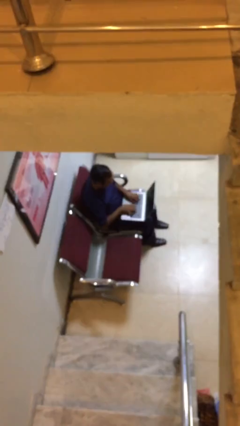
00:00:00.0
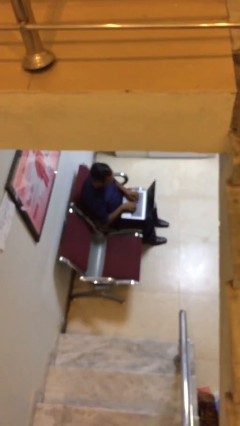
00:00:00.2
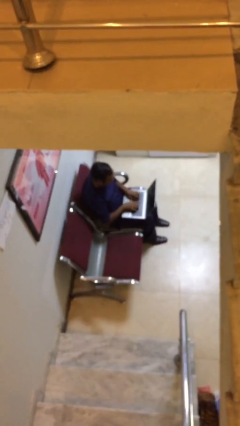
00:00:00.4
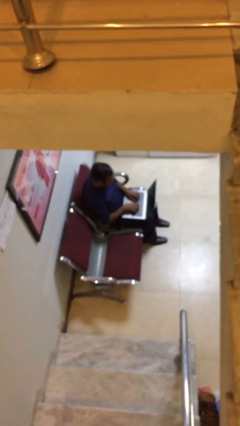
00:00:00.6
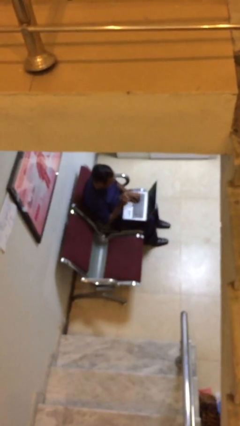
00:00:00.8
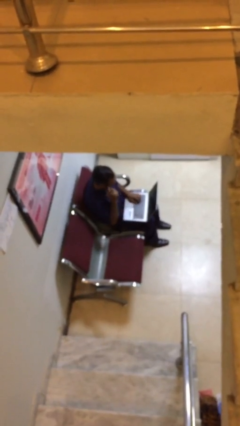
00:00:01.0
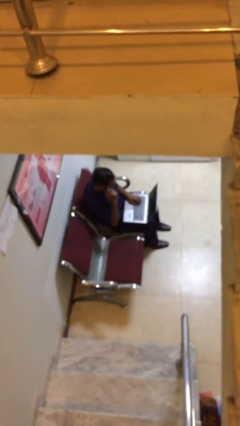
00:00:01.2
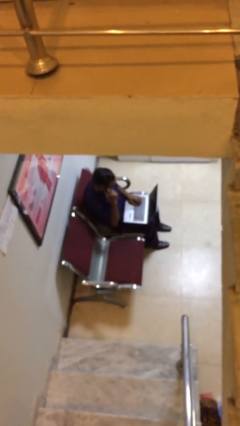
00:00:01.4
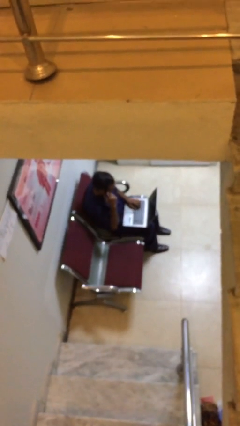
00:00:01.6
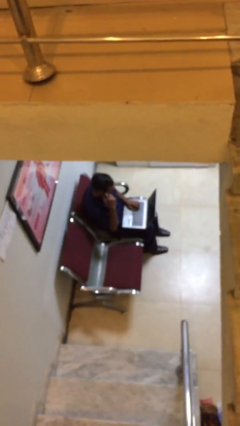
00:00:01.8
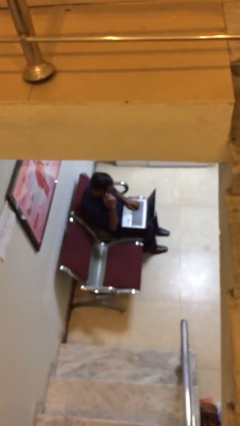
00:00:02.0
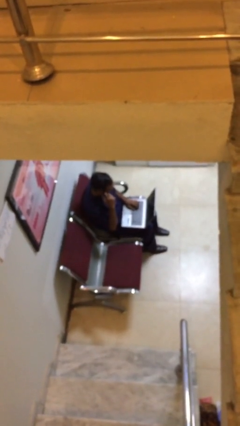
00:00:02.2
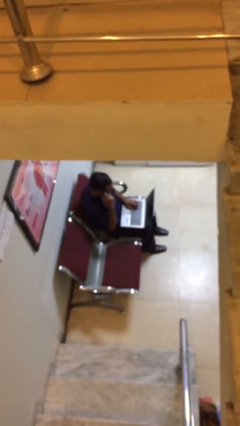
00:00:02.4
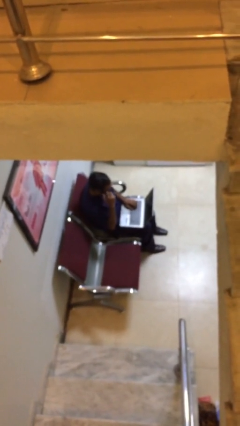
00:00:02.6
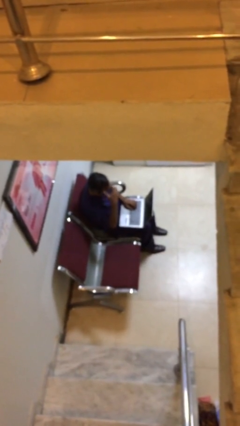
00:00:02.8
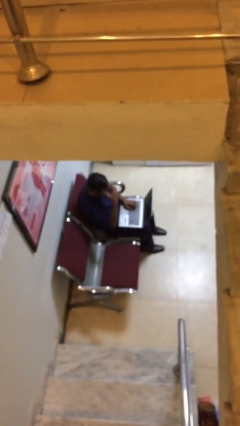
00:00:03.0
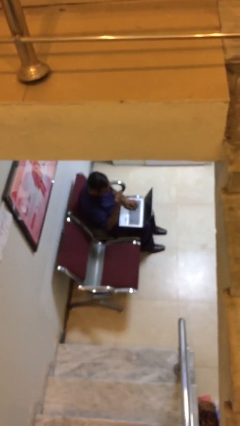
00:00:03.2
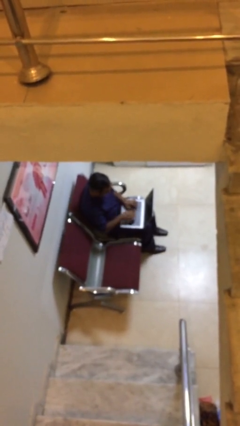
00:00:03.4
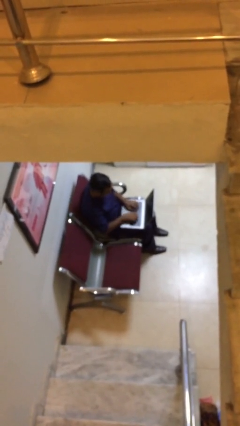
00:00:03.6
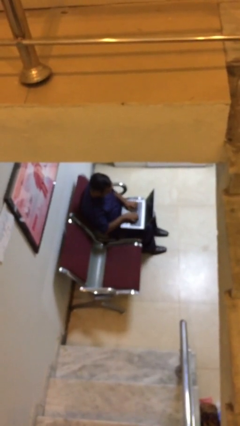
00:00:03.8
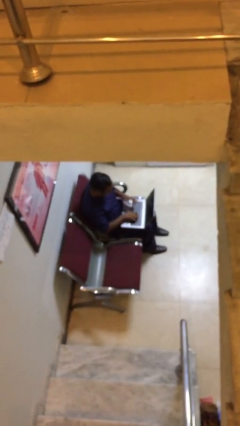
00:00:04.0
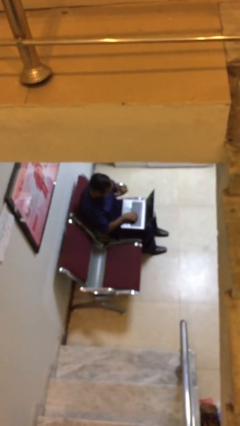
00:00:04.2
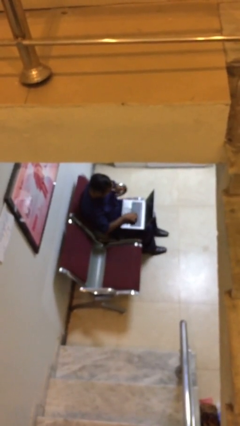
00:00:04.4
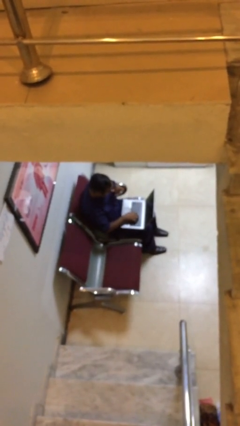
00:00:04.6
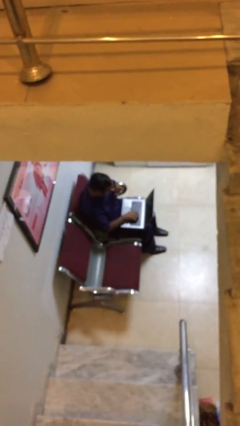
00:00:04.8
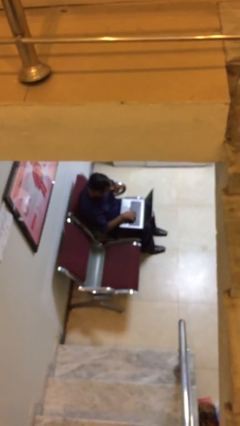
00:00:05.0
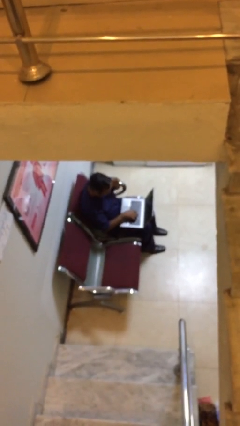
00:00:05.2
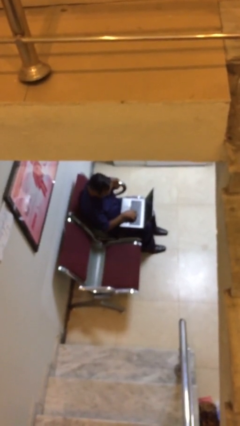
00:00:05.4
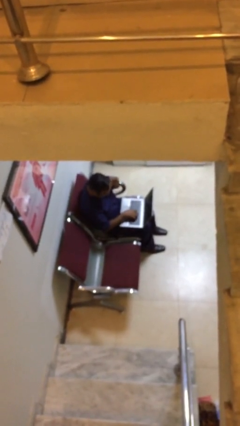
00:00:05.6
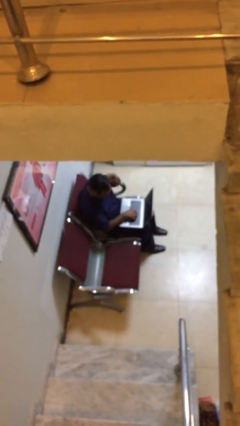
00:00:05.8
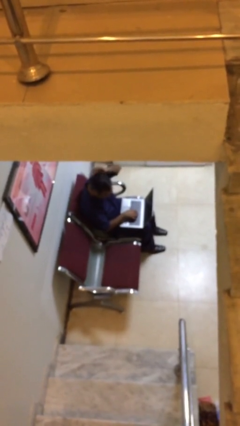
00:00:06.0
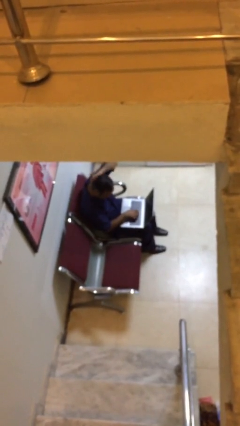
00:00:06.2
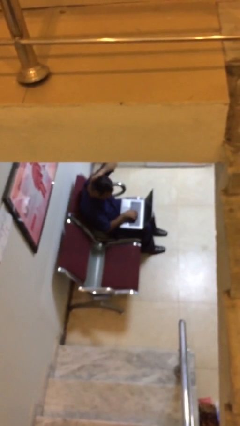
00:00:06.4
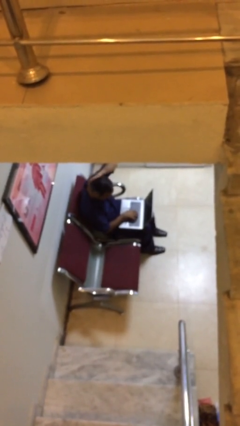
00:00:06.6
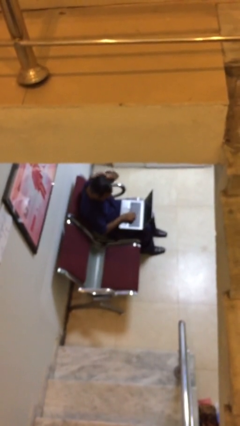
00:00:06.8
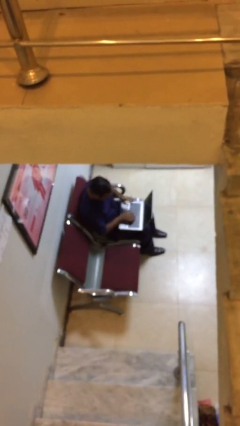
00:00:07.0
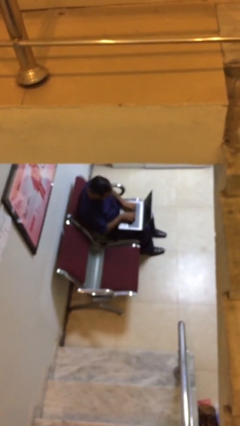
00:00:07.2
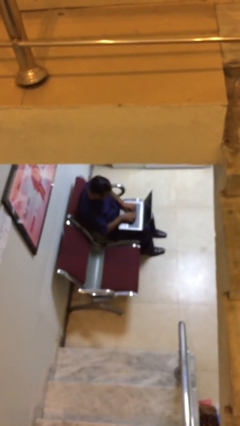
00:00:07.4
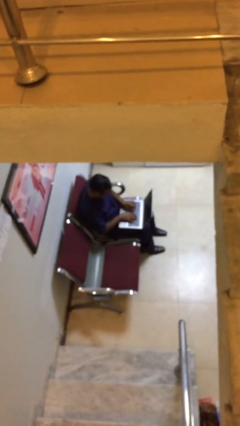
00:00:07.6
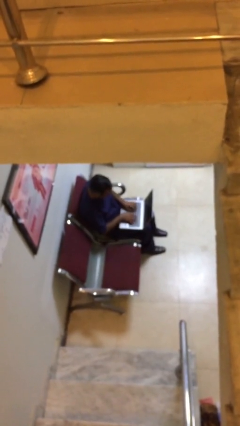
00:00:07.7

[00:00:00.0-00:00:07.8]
person interacts with laptop

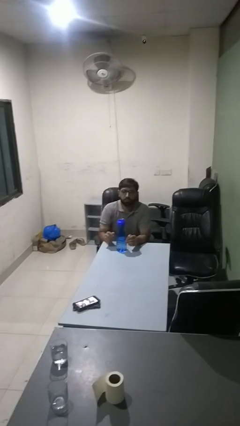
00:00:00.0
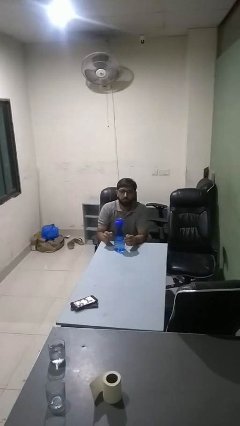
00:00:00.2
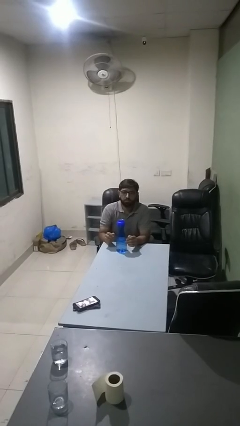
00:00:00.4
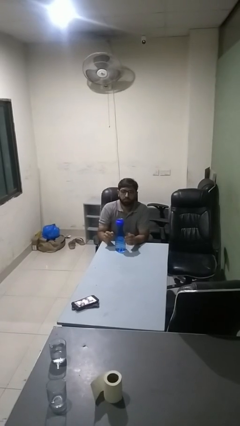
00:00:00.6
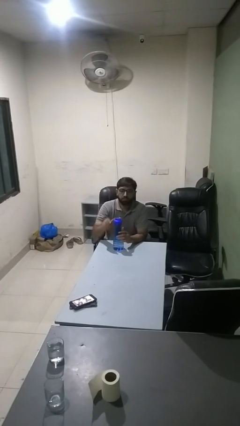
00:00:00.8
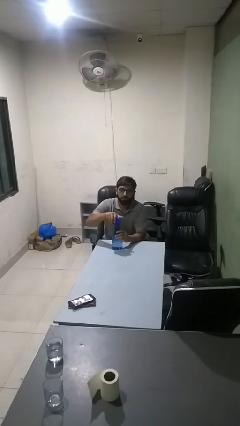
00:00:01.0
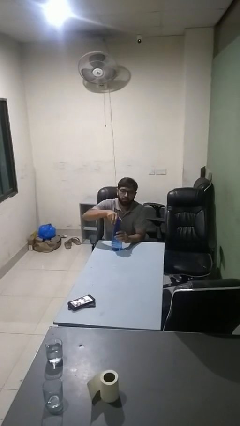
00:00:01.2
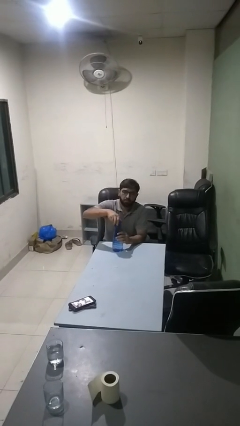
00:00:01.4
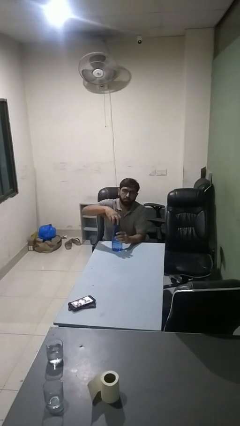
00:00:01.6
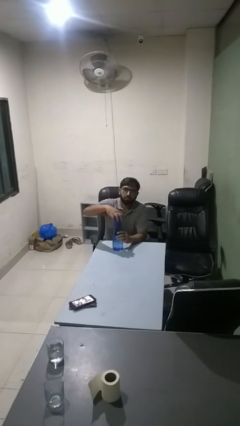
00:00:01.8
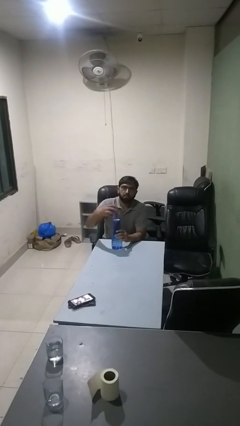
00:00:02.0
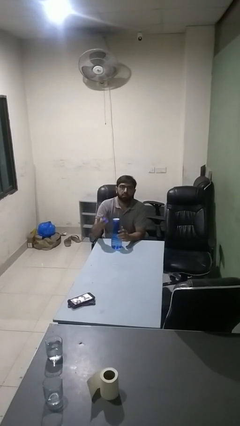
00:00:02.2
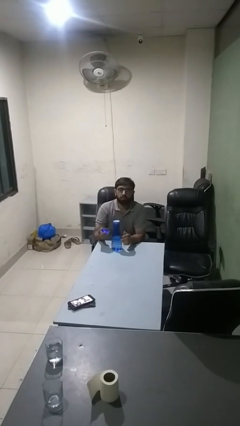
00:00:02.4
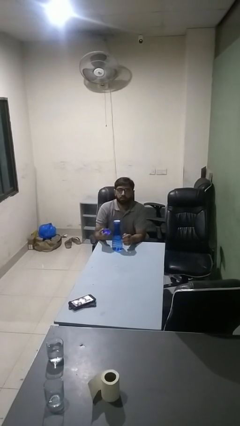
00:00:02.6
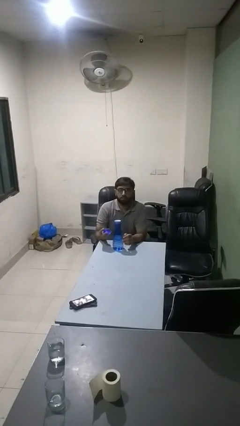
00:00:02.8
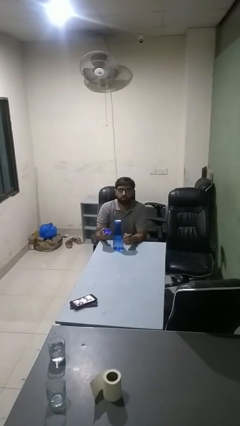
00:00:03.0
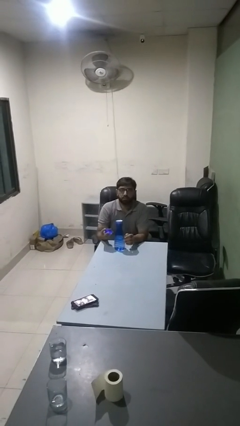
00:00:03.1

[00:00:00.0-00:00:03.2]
person unscrews lid from bottle

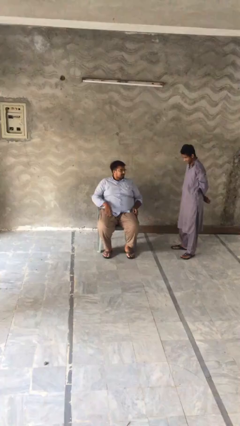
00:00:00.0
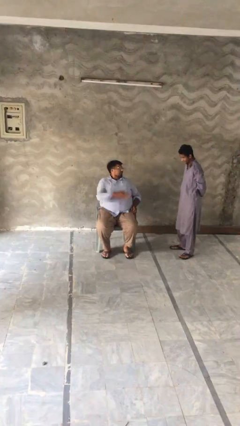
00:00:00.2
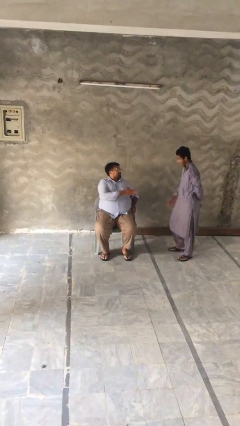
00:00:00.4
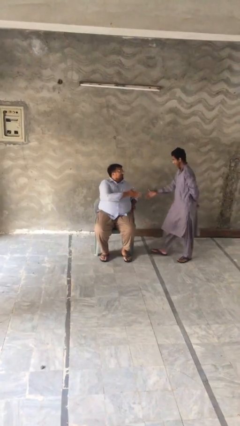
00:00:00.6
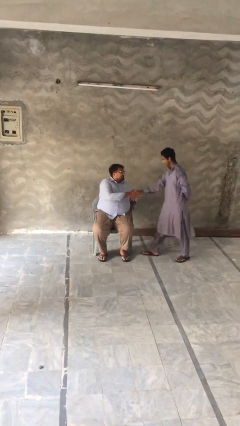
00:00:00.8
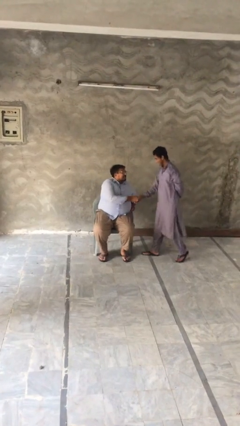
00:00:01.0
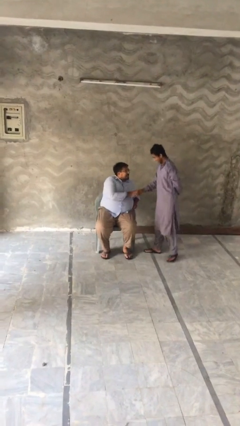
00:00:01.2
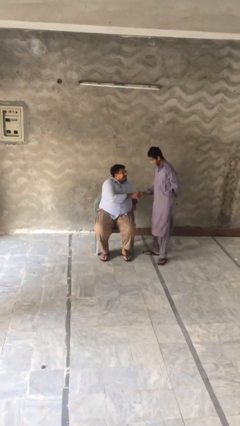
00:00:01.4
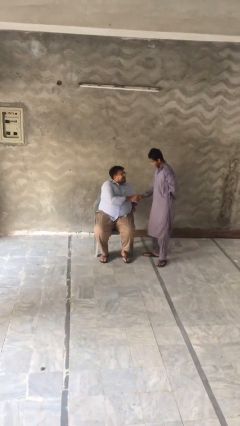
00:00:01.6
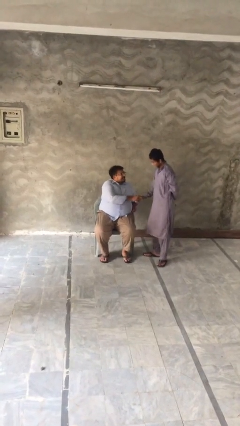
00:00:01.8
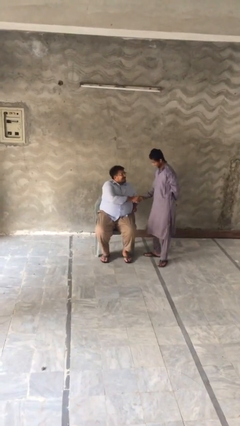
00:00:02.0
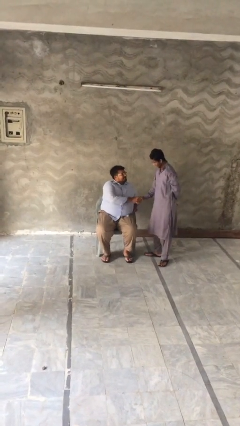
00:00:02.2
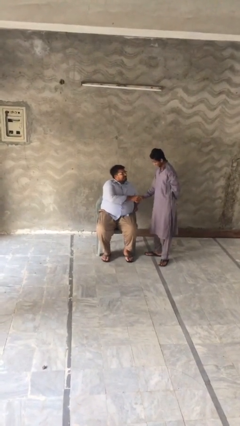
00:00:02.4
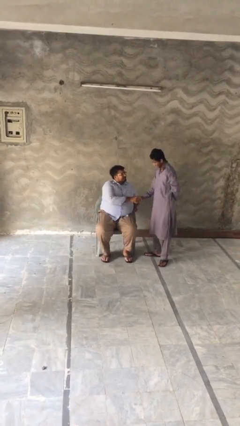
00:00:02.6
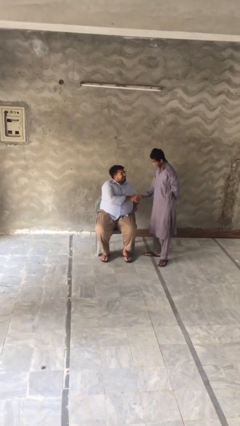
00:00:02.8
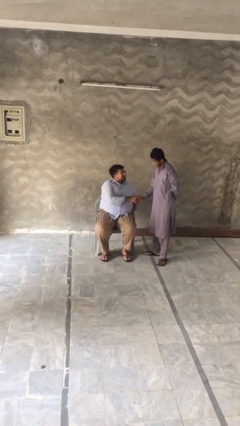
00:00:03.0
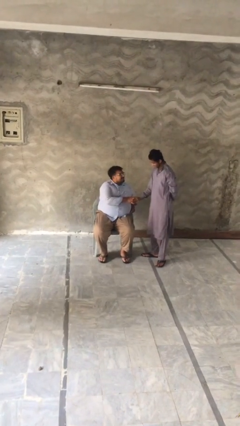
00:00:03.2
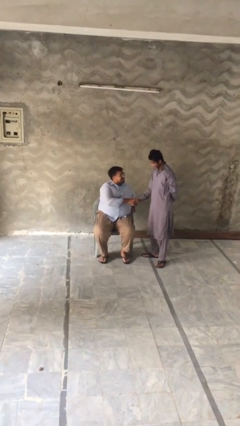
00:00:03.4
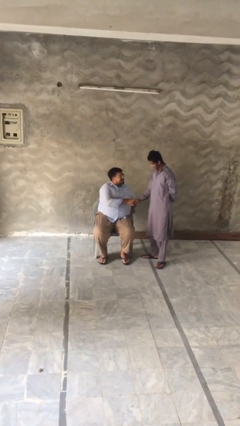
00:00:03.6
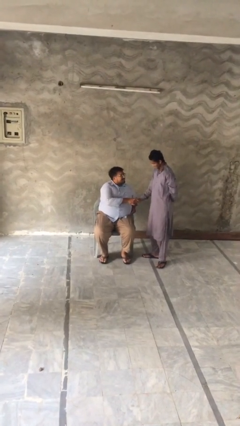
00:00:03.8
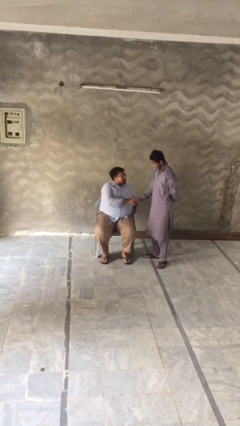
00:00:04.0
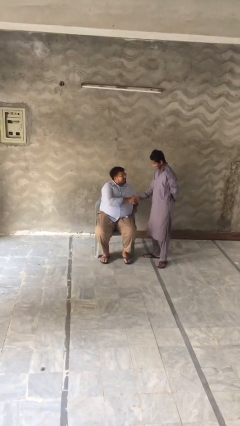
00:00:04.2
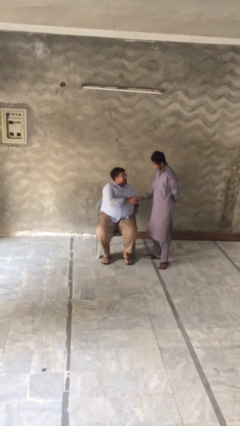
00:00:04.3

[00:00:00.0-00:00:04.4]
person shakes hand

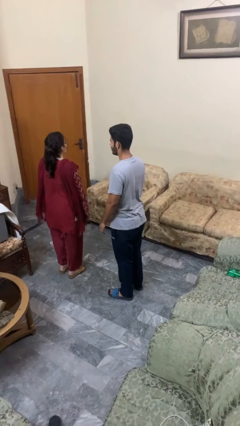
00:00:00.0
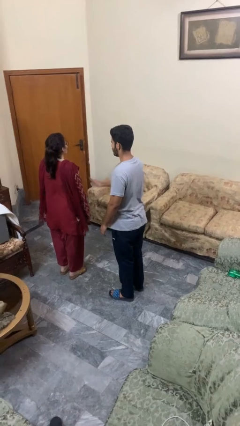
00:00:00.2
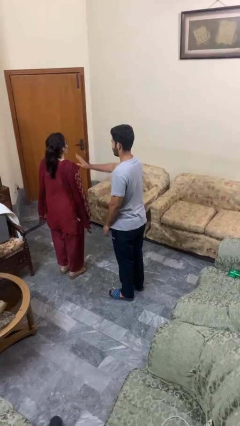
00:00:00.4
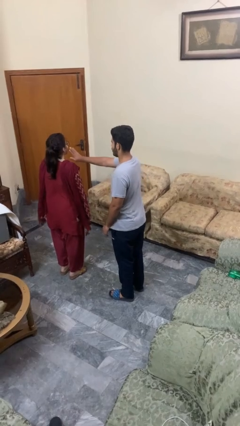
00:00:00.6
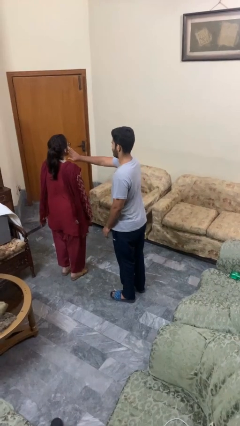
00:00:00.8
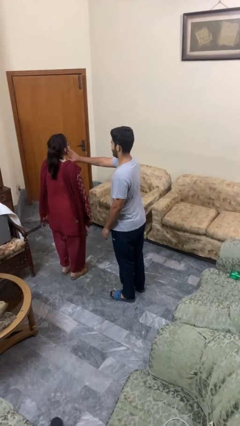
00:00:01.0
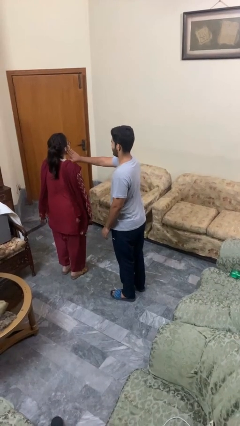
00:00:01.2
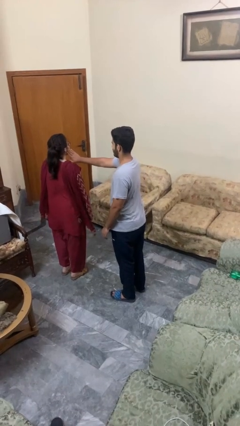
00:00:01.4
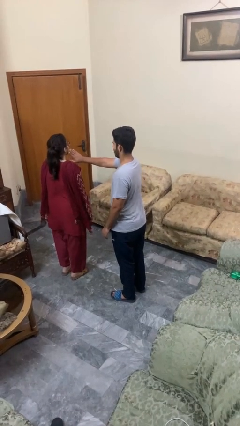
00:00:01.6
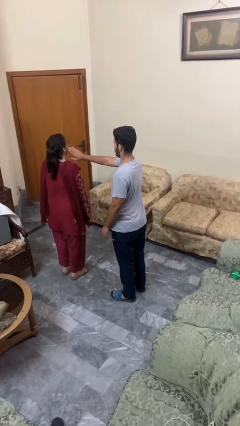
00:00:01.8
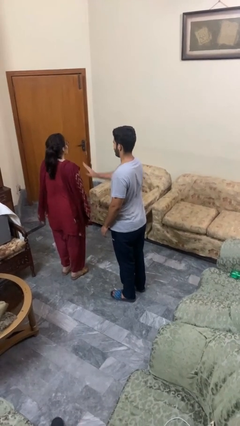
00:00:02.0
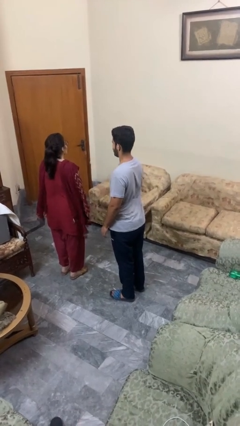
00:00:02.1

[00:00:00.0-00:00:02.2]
person touches face of person

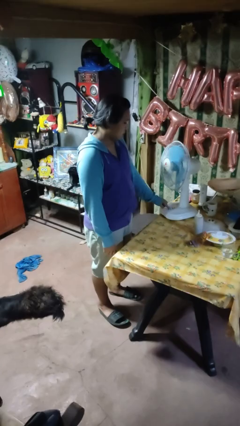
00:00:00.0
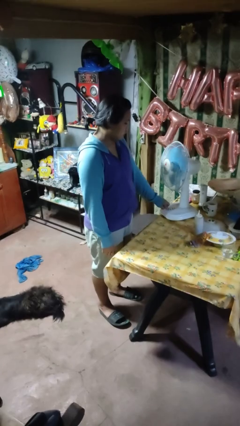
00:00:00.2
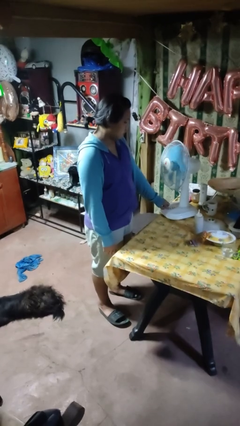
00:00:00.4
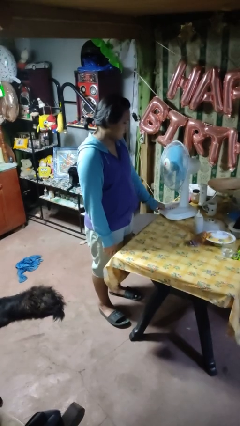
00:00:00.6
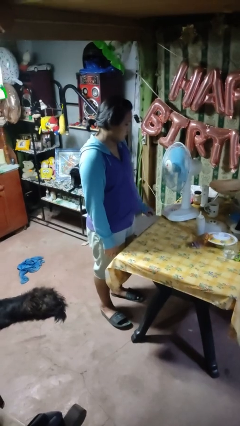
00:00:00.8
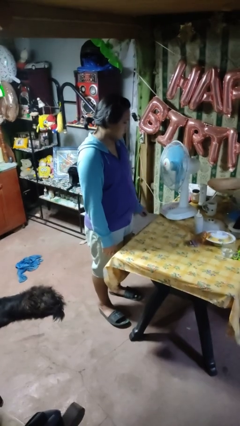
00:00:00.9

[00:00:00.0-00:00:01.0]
person turns on fan
